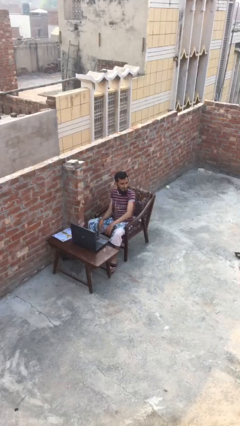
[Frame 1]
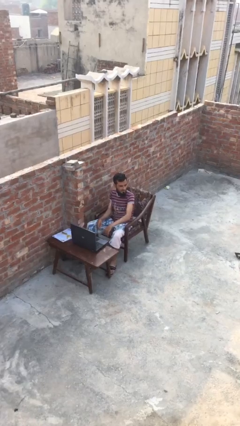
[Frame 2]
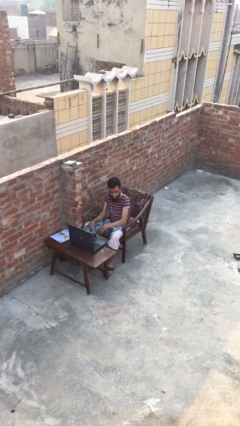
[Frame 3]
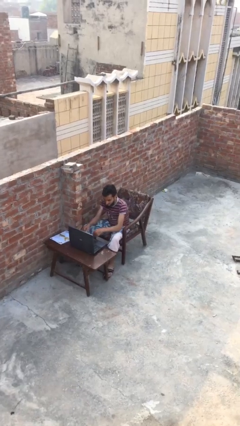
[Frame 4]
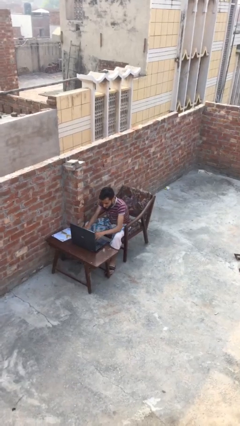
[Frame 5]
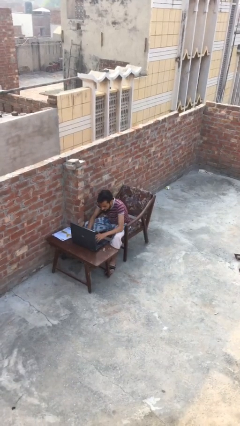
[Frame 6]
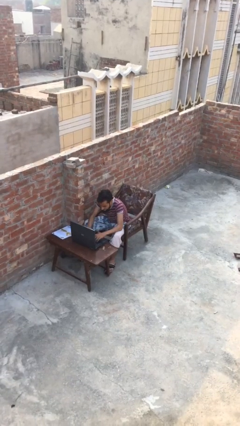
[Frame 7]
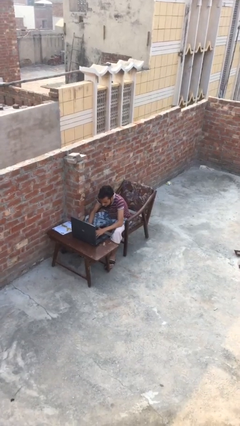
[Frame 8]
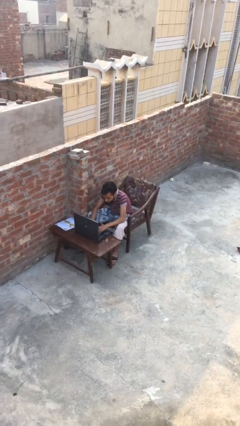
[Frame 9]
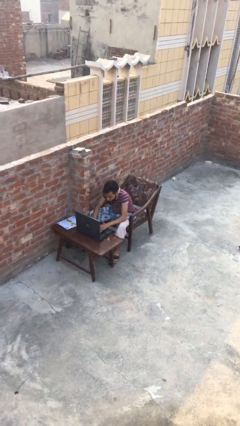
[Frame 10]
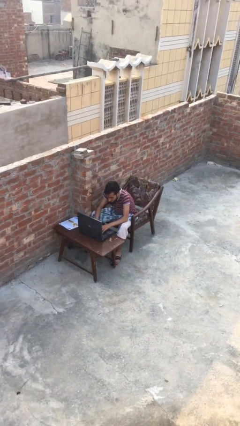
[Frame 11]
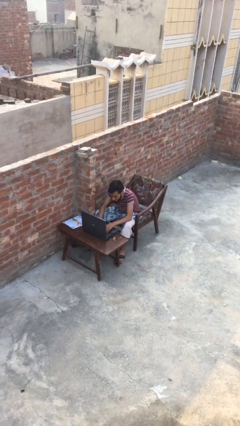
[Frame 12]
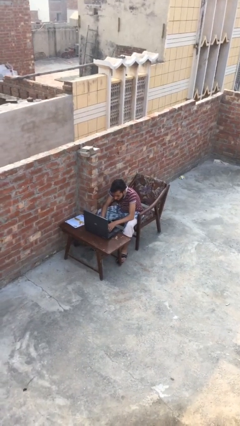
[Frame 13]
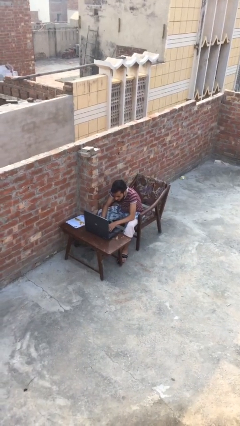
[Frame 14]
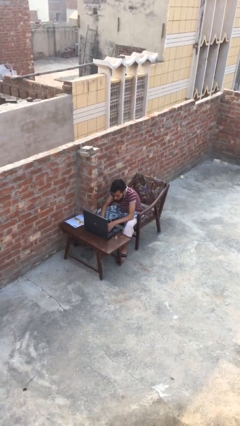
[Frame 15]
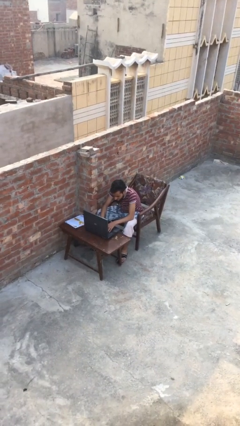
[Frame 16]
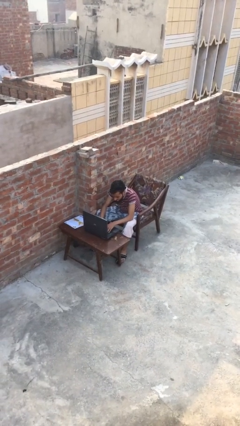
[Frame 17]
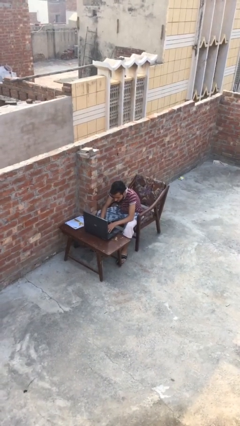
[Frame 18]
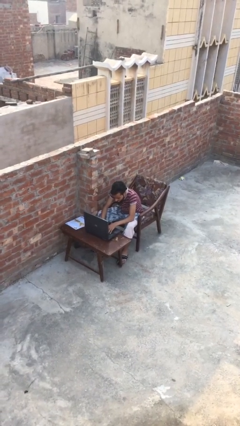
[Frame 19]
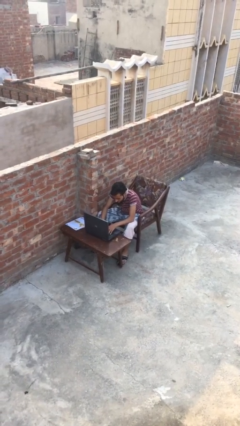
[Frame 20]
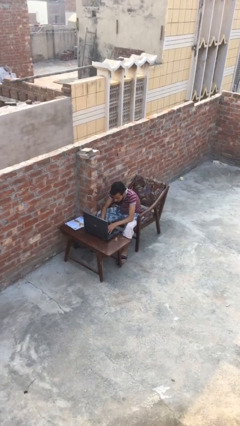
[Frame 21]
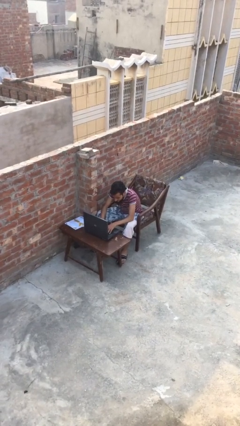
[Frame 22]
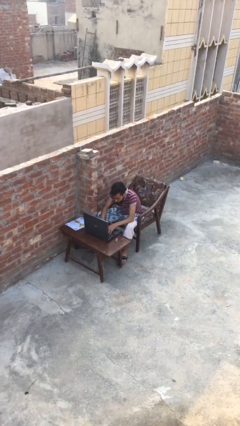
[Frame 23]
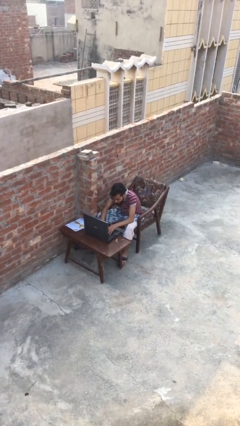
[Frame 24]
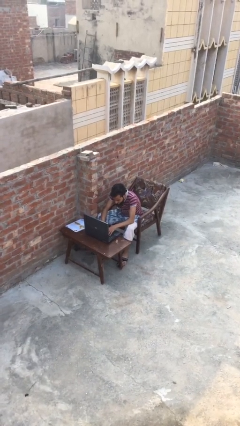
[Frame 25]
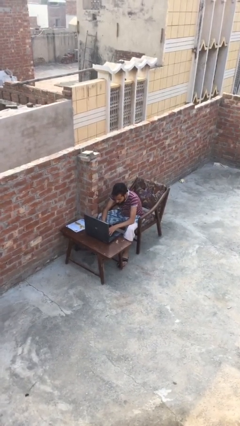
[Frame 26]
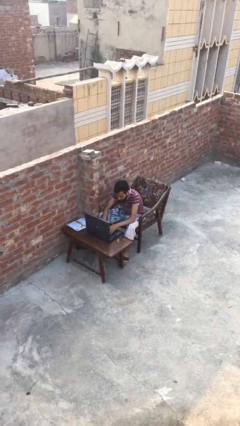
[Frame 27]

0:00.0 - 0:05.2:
person interacts with laptop

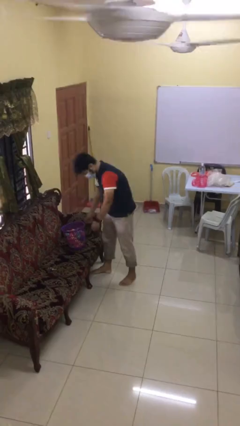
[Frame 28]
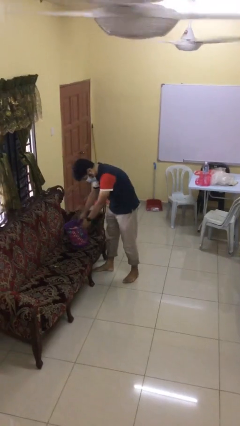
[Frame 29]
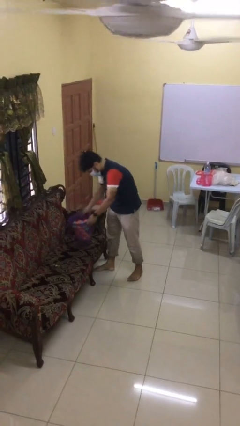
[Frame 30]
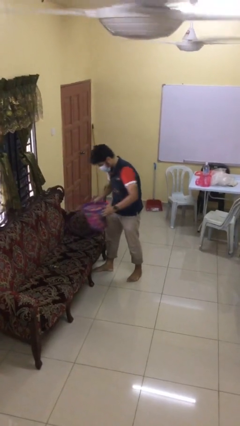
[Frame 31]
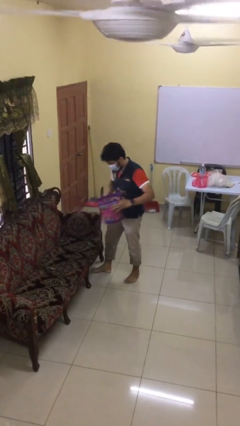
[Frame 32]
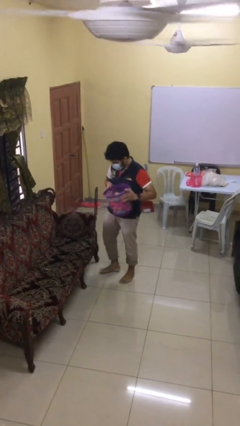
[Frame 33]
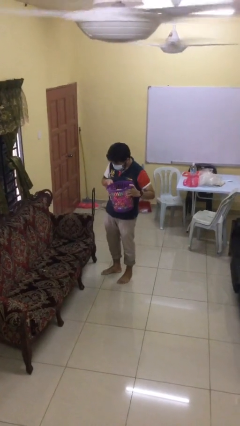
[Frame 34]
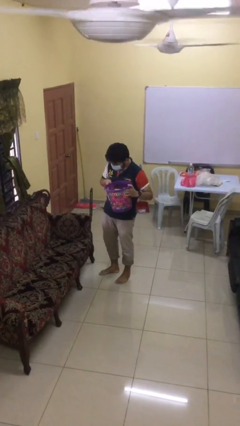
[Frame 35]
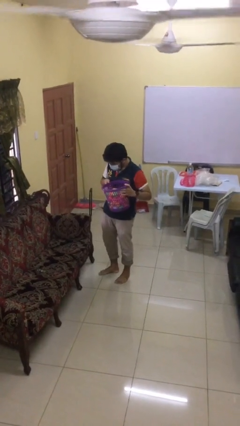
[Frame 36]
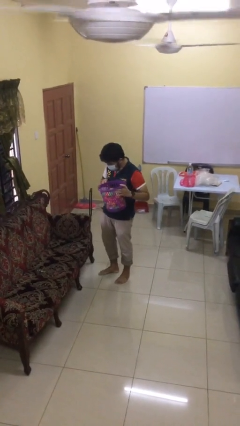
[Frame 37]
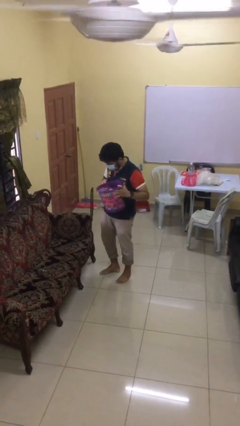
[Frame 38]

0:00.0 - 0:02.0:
person picks up object from couch

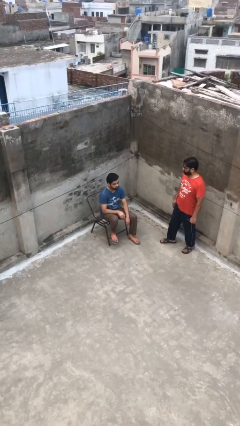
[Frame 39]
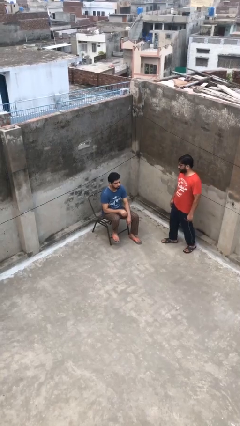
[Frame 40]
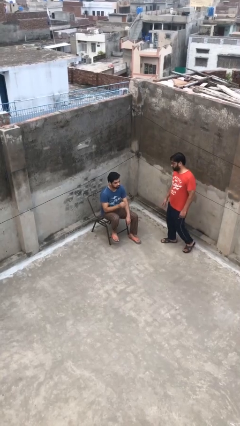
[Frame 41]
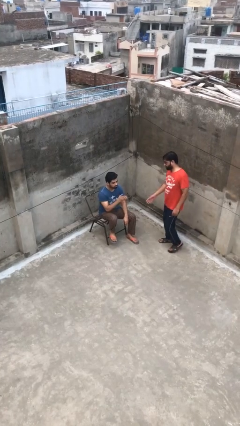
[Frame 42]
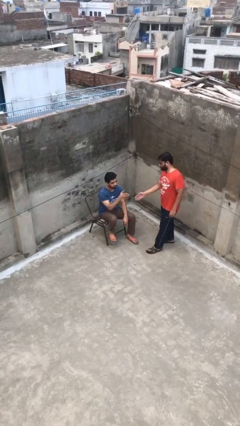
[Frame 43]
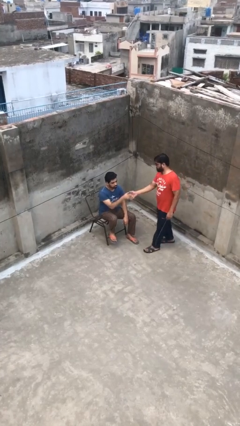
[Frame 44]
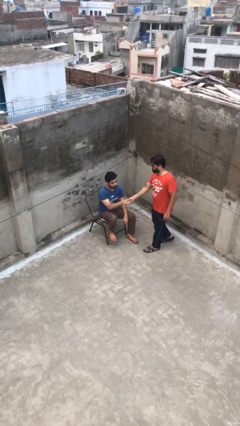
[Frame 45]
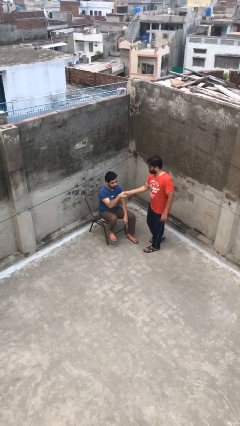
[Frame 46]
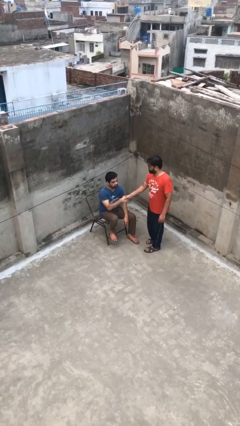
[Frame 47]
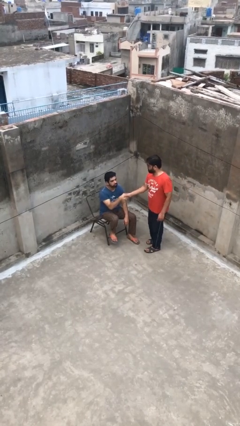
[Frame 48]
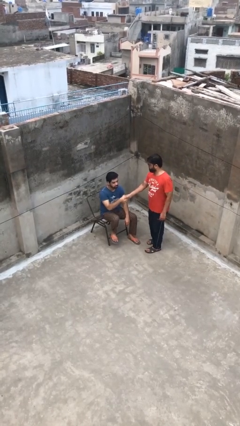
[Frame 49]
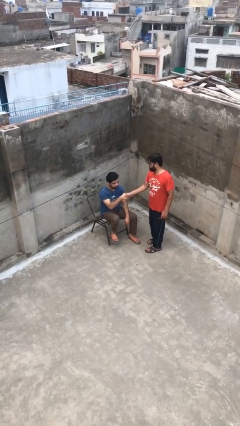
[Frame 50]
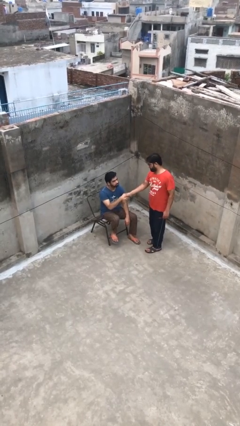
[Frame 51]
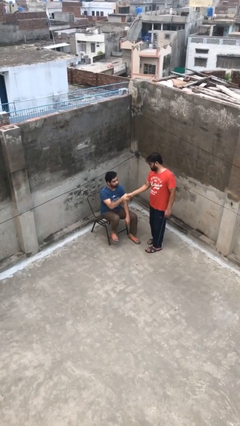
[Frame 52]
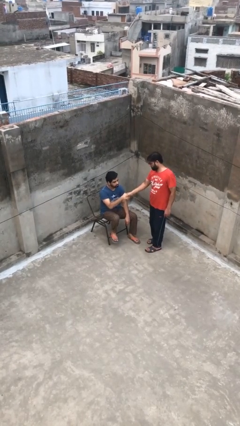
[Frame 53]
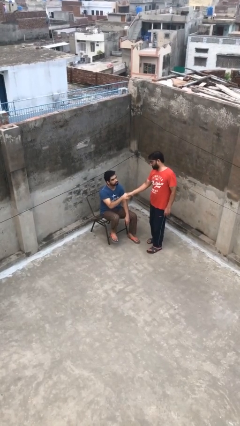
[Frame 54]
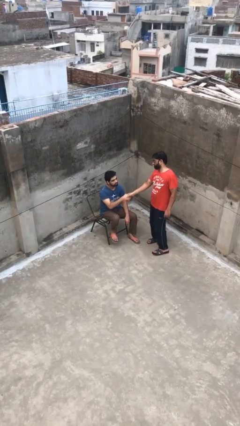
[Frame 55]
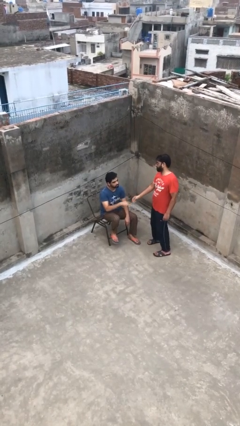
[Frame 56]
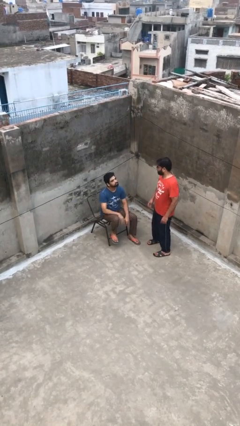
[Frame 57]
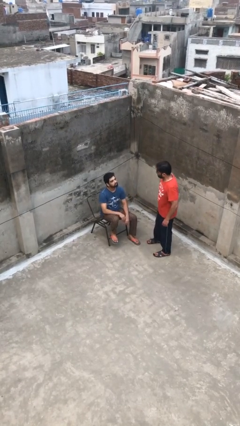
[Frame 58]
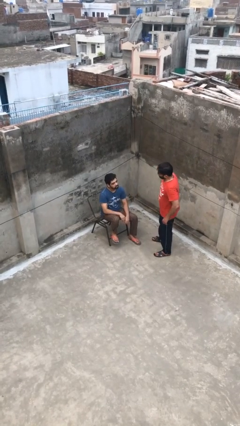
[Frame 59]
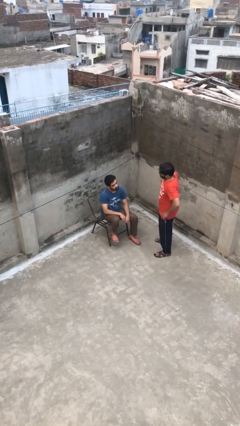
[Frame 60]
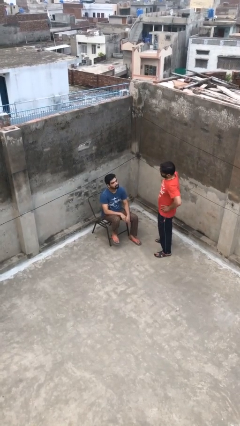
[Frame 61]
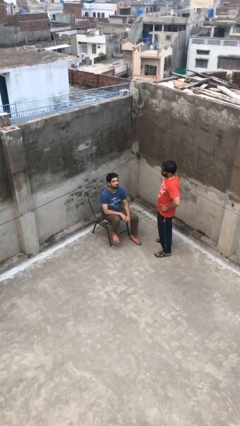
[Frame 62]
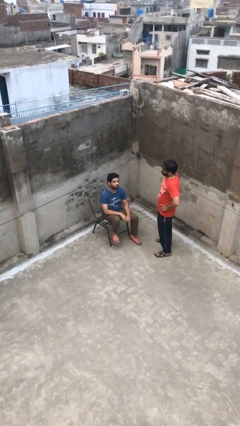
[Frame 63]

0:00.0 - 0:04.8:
person shakes hand

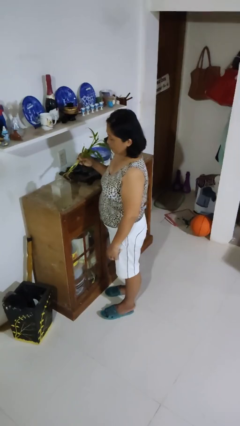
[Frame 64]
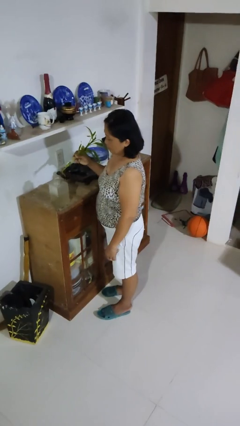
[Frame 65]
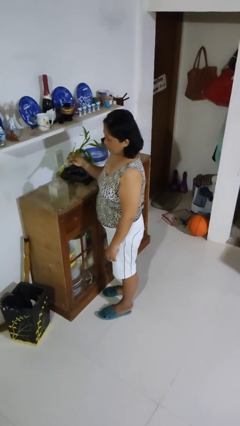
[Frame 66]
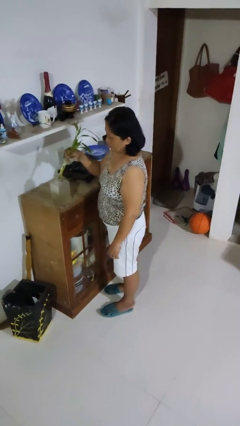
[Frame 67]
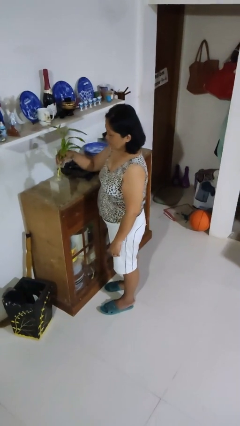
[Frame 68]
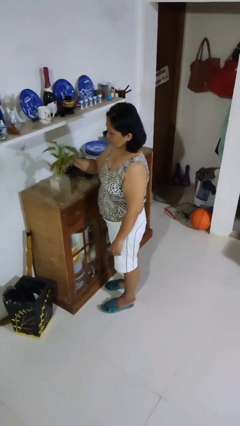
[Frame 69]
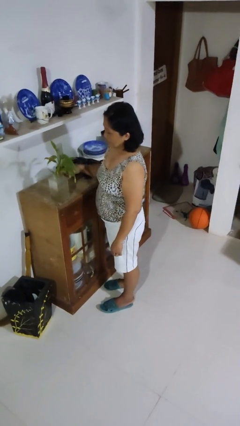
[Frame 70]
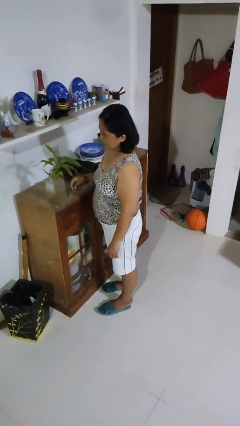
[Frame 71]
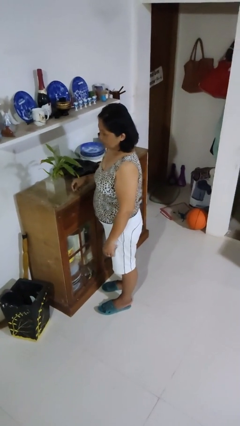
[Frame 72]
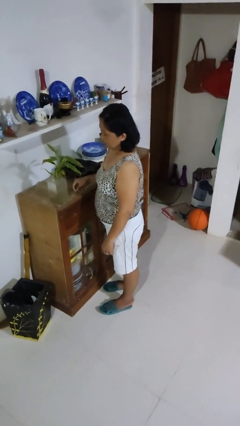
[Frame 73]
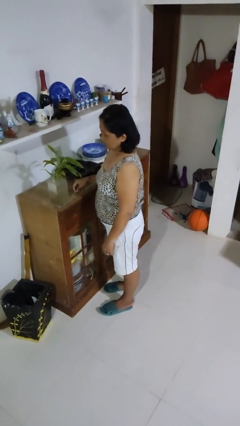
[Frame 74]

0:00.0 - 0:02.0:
person arranges flowers in vase

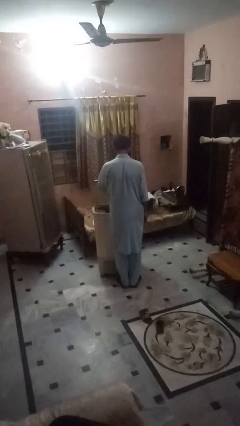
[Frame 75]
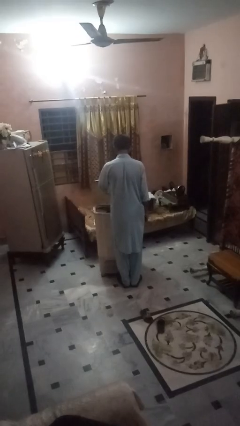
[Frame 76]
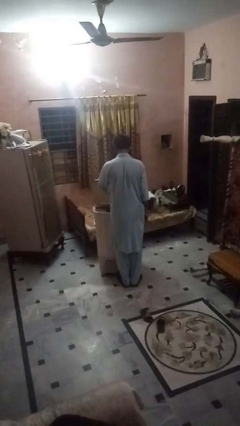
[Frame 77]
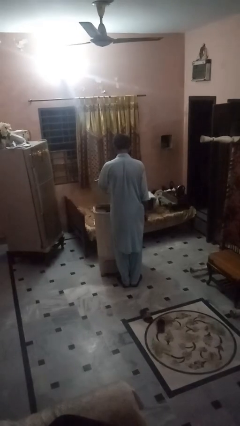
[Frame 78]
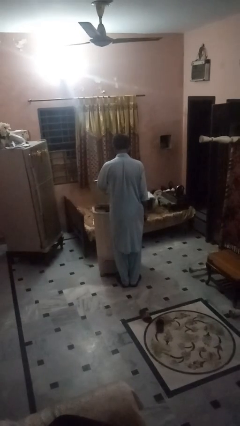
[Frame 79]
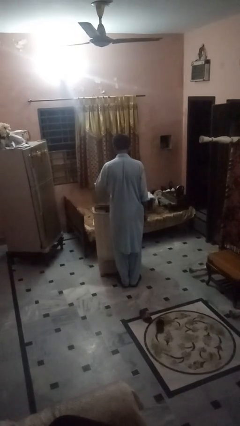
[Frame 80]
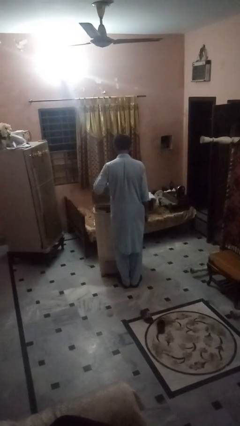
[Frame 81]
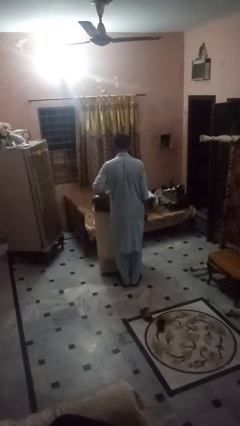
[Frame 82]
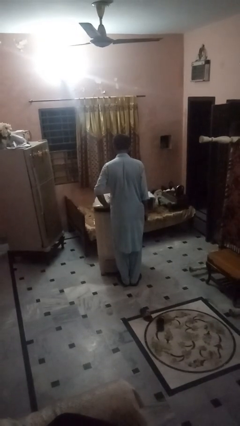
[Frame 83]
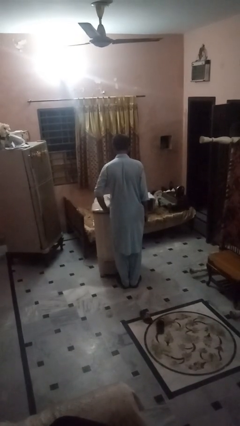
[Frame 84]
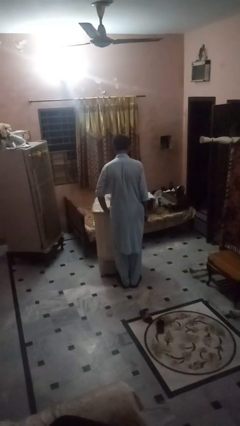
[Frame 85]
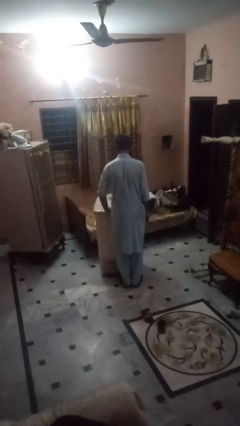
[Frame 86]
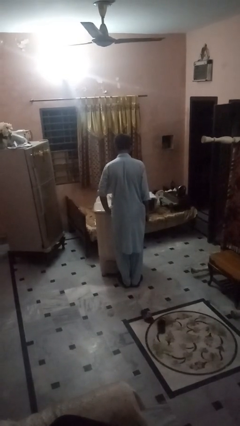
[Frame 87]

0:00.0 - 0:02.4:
person closes clothes washer

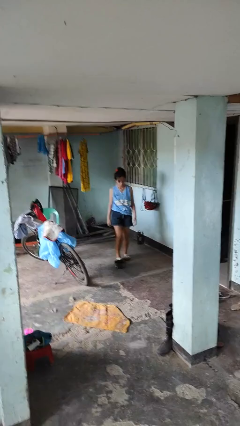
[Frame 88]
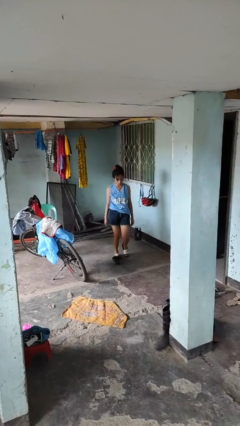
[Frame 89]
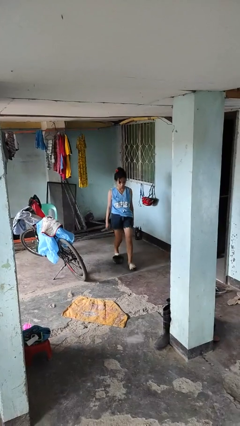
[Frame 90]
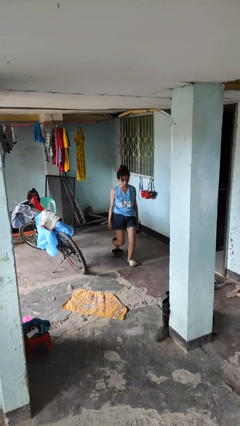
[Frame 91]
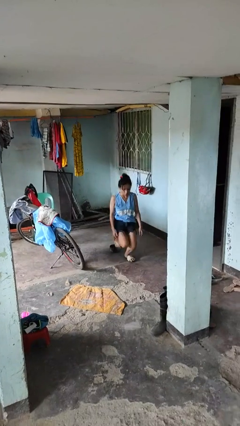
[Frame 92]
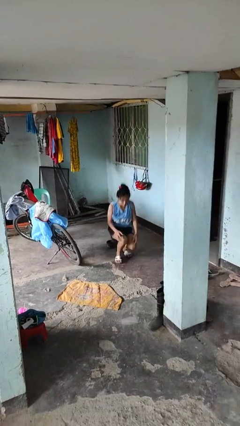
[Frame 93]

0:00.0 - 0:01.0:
person trips on object on floor
